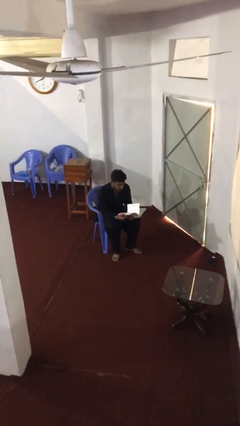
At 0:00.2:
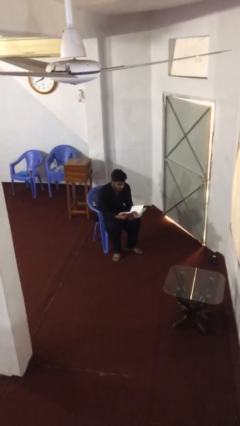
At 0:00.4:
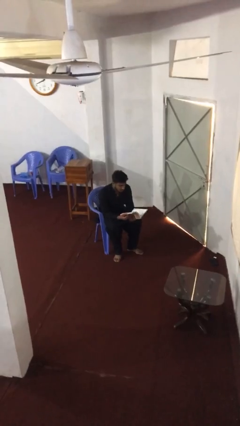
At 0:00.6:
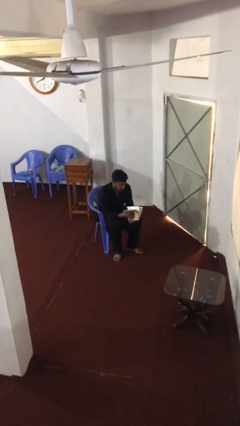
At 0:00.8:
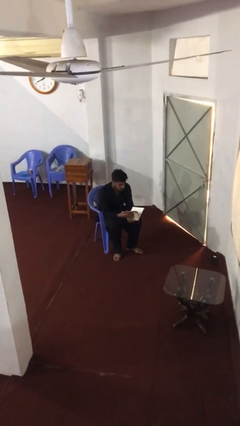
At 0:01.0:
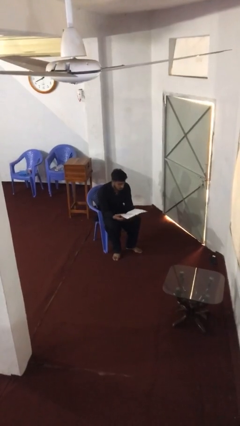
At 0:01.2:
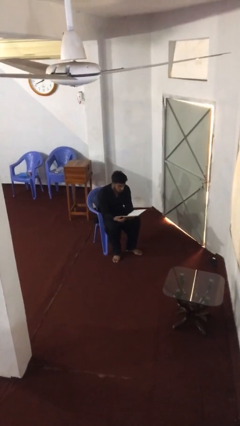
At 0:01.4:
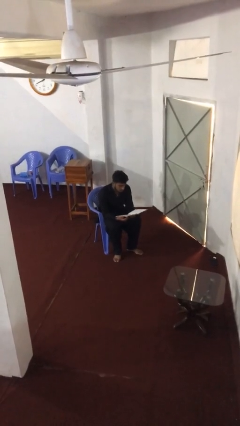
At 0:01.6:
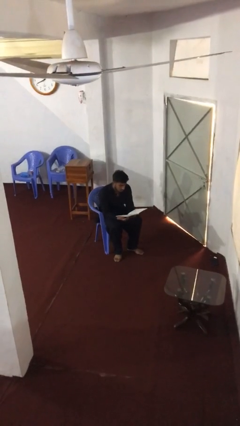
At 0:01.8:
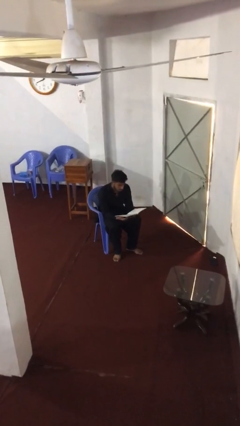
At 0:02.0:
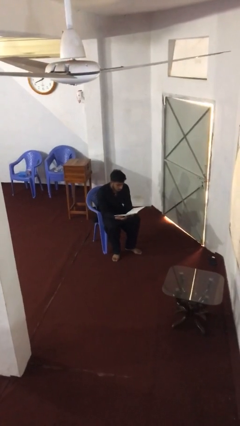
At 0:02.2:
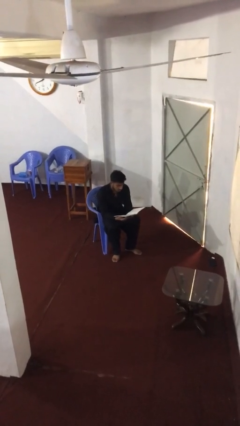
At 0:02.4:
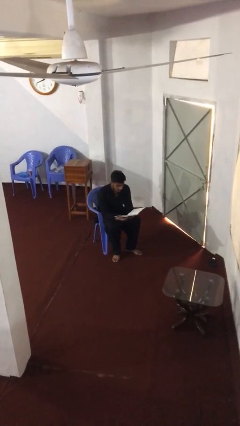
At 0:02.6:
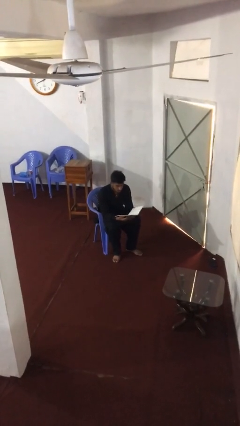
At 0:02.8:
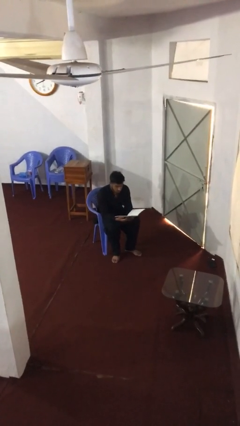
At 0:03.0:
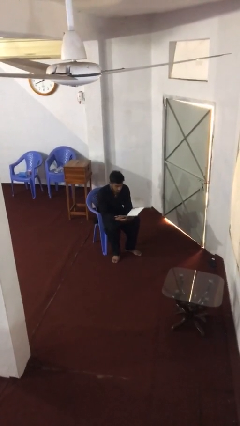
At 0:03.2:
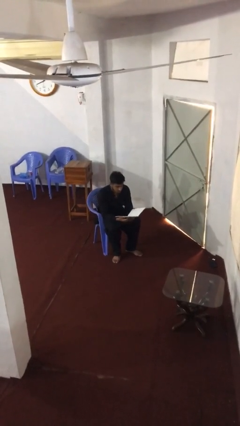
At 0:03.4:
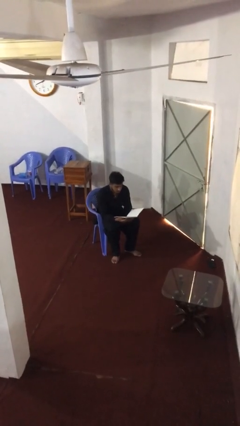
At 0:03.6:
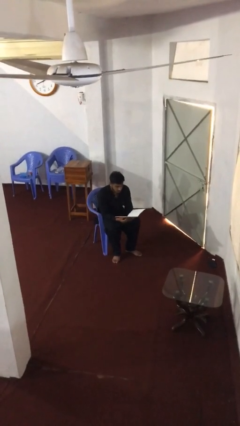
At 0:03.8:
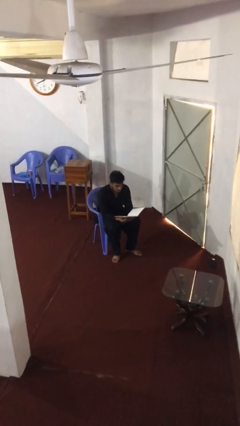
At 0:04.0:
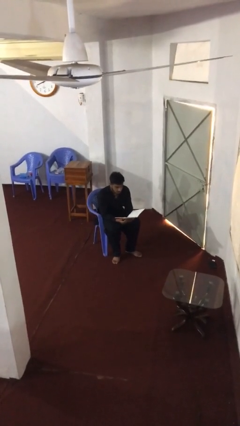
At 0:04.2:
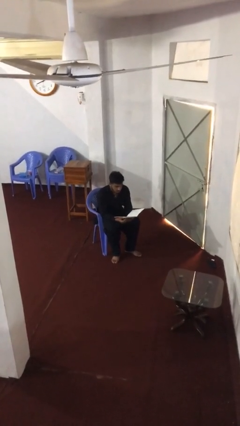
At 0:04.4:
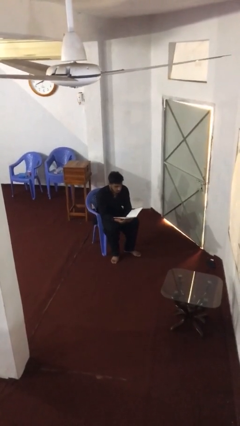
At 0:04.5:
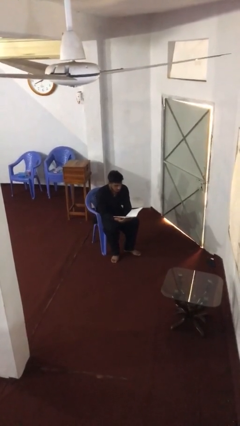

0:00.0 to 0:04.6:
person reads document

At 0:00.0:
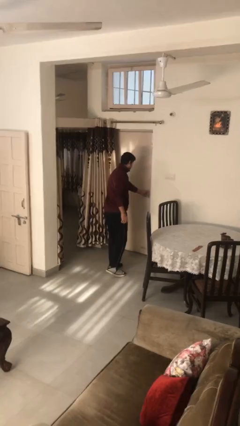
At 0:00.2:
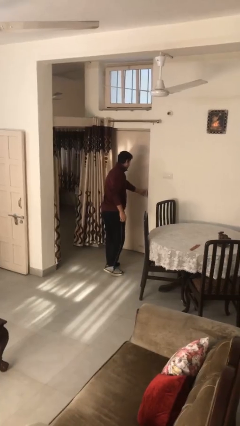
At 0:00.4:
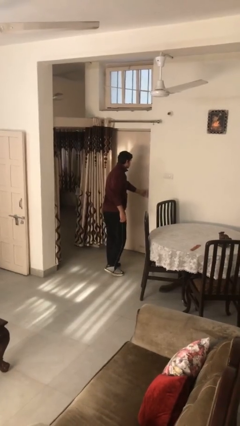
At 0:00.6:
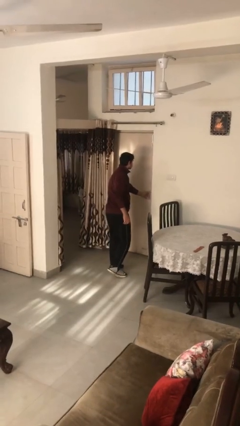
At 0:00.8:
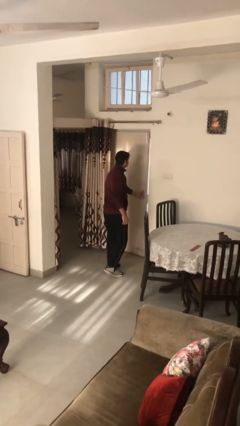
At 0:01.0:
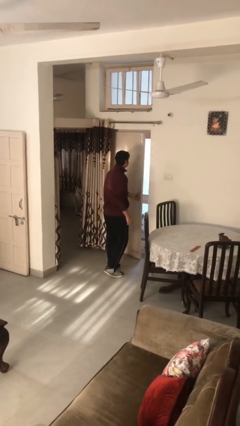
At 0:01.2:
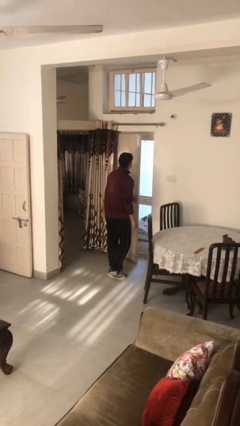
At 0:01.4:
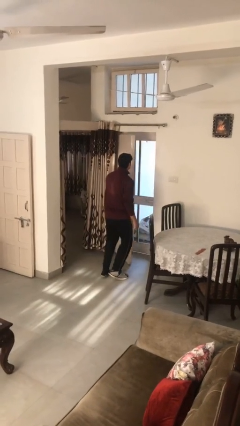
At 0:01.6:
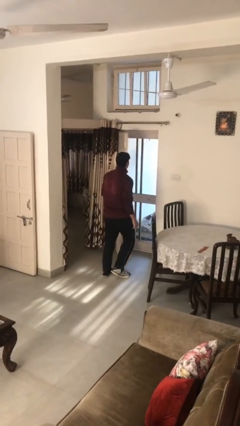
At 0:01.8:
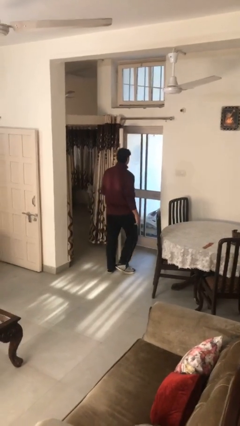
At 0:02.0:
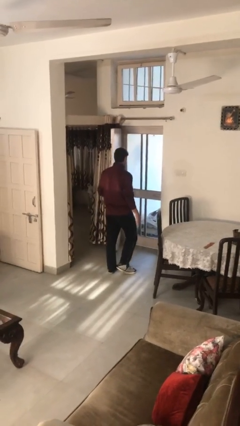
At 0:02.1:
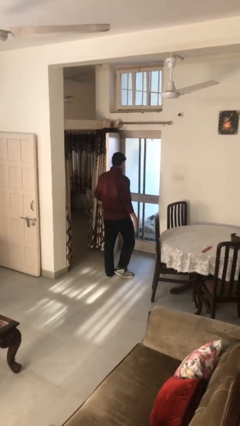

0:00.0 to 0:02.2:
person opens facility door

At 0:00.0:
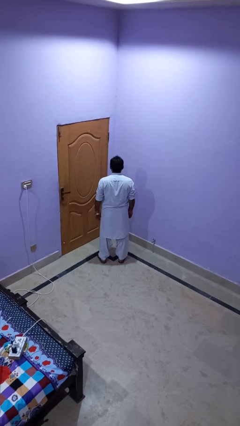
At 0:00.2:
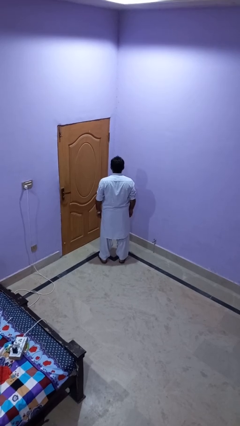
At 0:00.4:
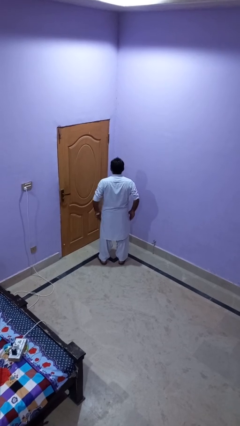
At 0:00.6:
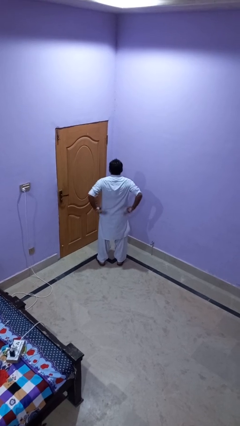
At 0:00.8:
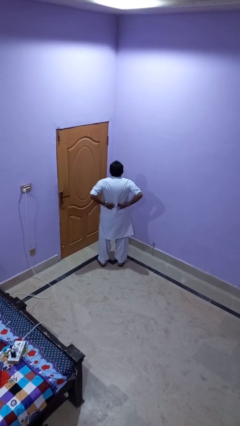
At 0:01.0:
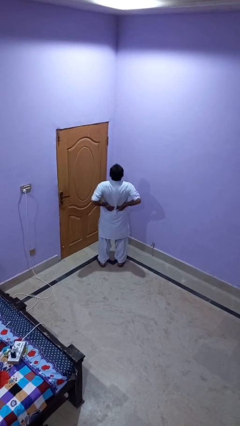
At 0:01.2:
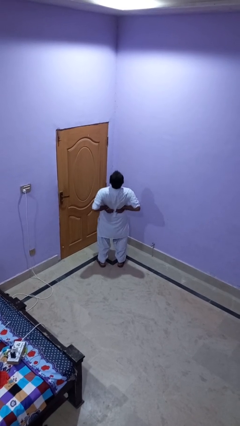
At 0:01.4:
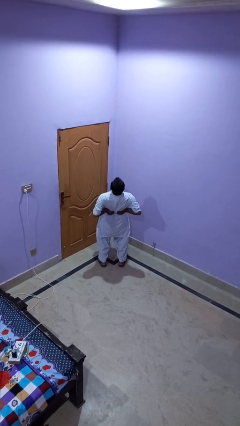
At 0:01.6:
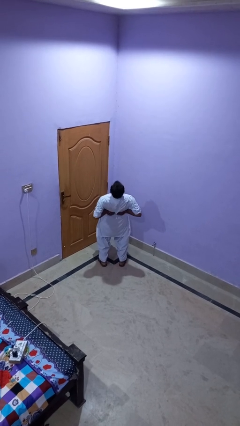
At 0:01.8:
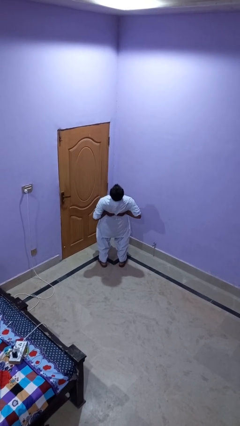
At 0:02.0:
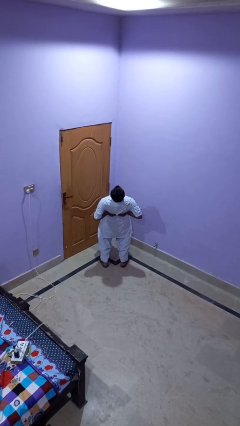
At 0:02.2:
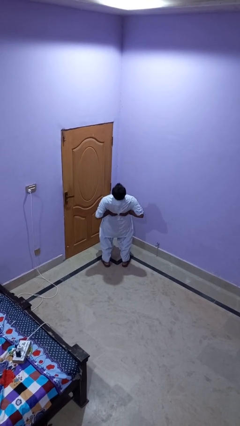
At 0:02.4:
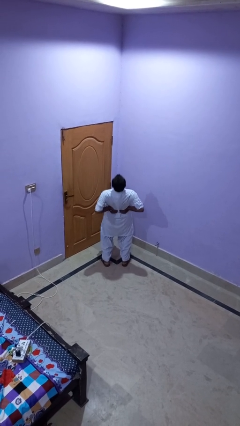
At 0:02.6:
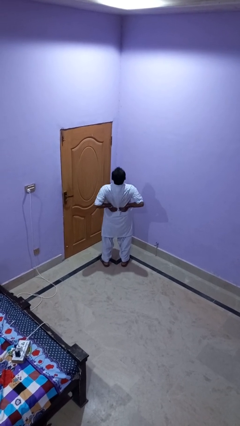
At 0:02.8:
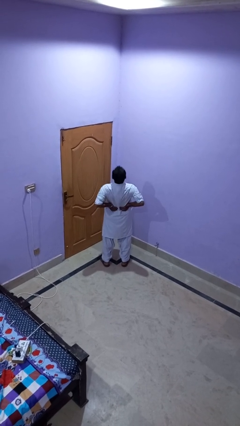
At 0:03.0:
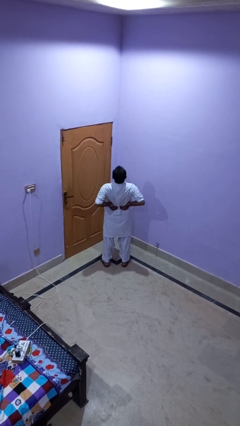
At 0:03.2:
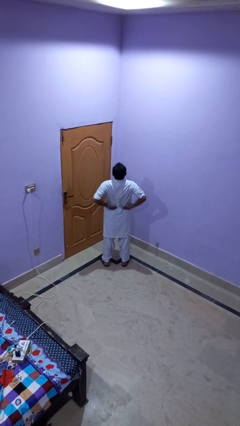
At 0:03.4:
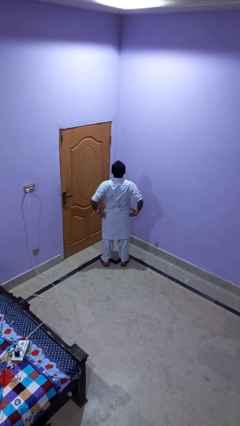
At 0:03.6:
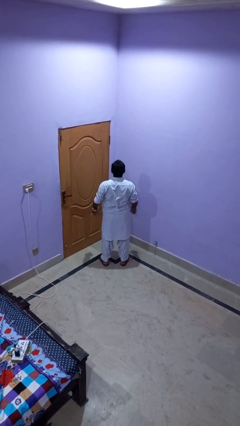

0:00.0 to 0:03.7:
person stretches back

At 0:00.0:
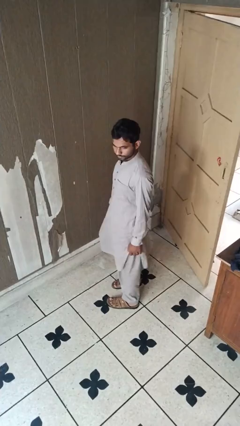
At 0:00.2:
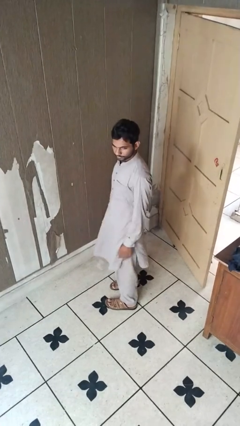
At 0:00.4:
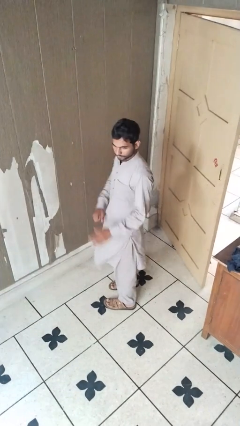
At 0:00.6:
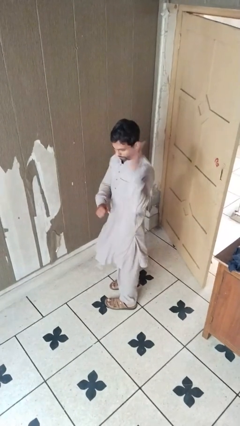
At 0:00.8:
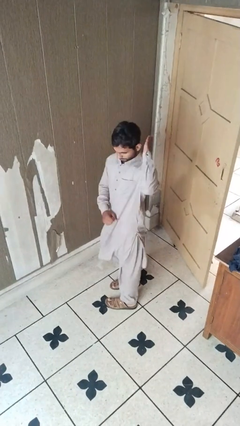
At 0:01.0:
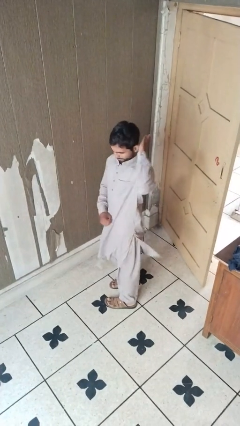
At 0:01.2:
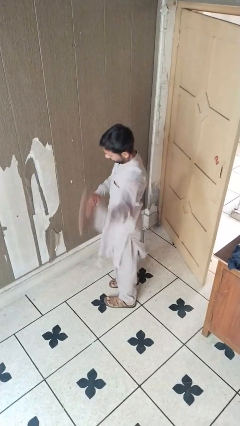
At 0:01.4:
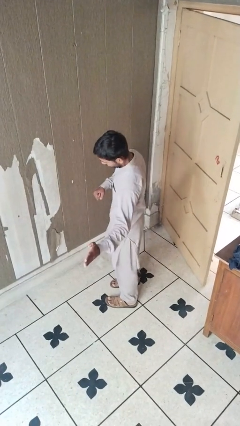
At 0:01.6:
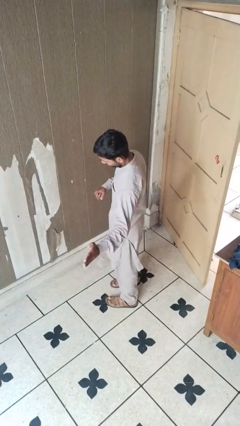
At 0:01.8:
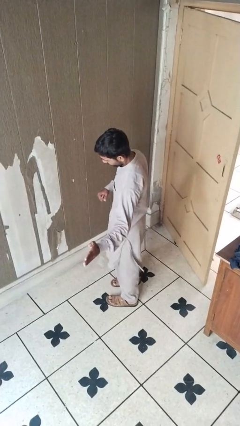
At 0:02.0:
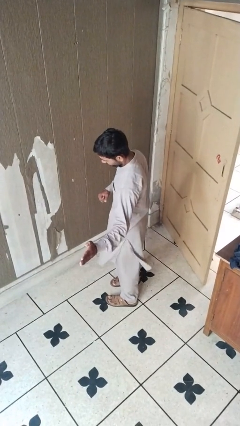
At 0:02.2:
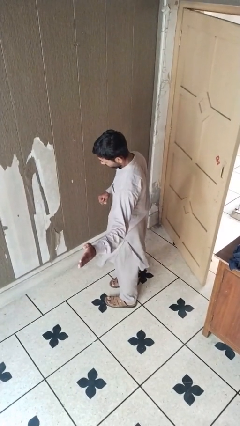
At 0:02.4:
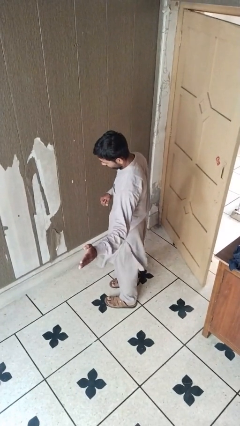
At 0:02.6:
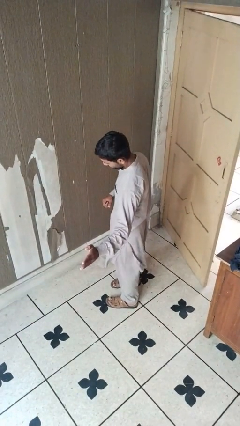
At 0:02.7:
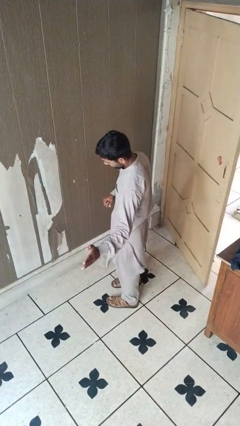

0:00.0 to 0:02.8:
person karate chop

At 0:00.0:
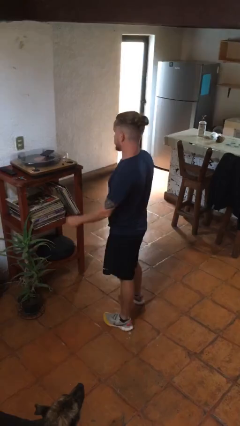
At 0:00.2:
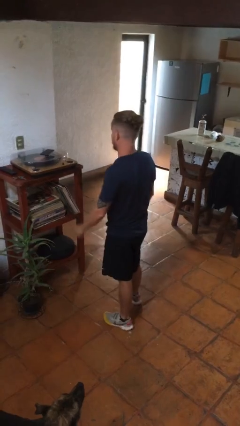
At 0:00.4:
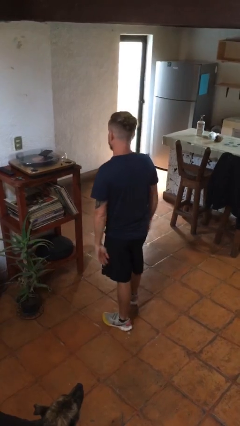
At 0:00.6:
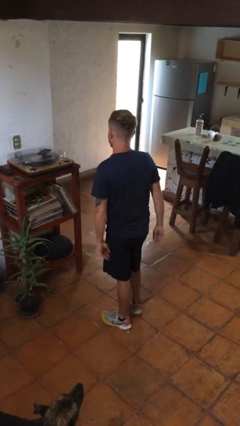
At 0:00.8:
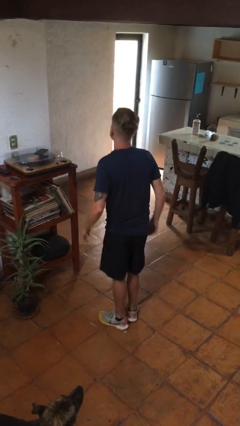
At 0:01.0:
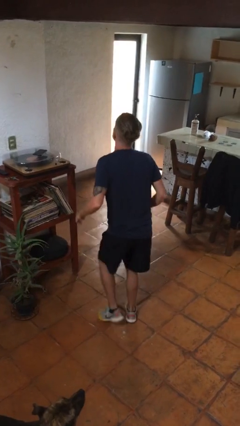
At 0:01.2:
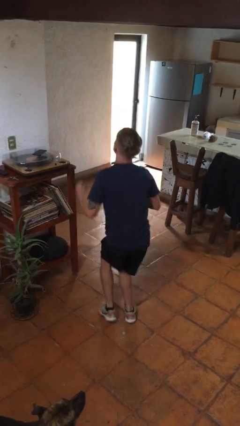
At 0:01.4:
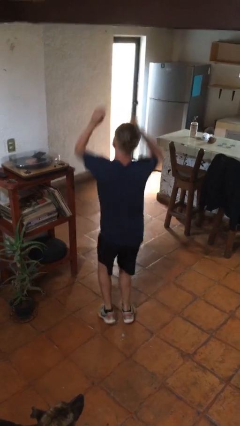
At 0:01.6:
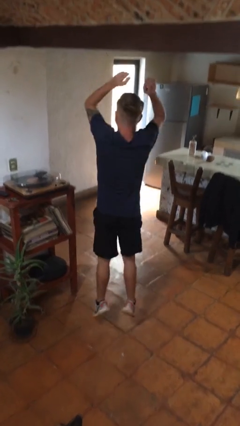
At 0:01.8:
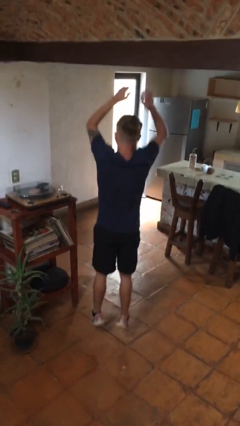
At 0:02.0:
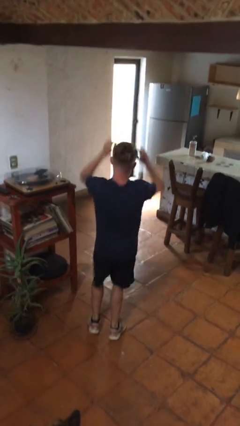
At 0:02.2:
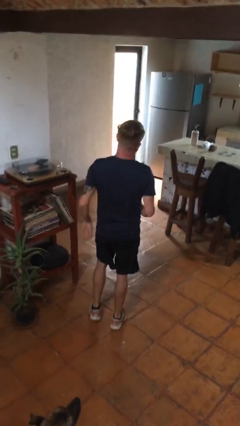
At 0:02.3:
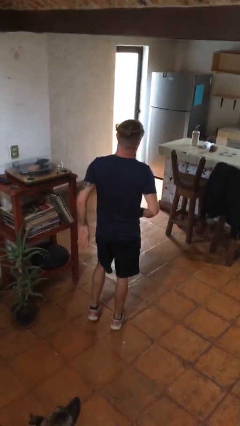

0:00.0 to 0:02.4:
person jumps

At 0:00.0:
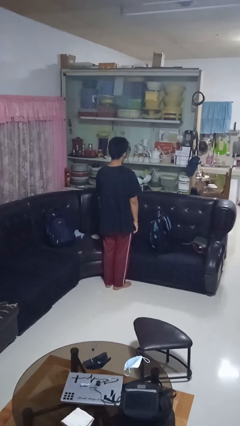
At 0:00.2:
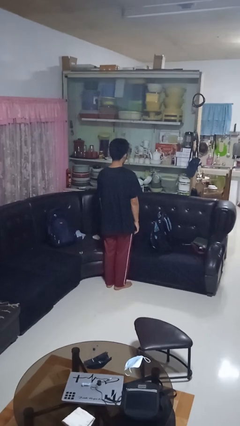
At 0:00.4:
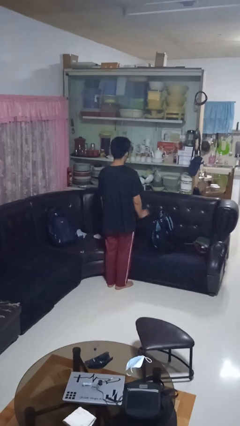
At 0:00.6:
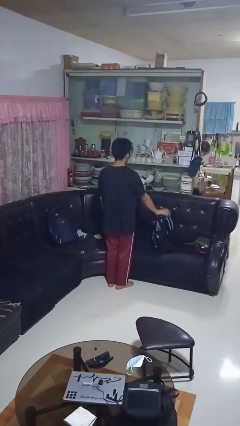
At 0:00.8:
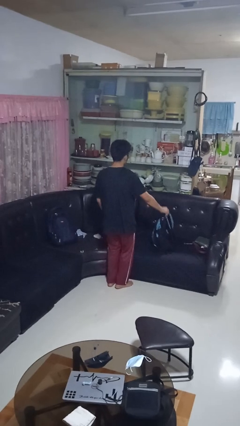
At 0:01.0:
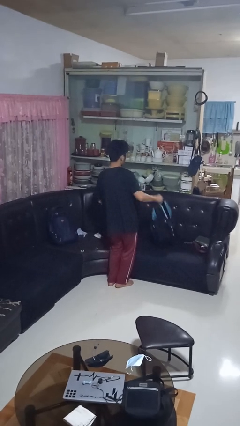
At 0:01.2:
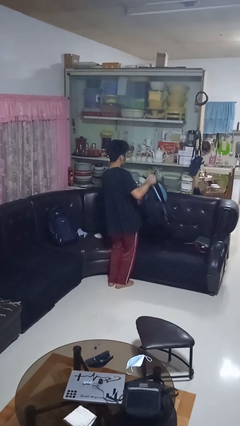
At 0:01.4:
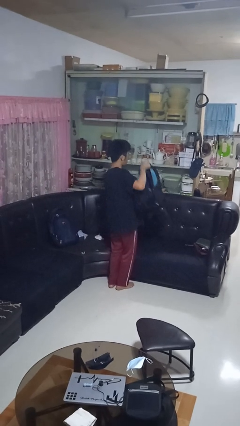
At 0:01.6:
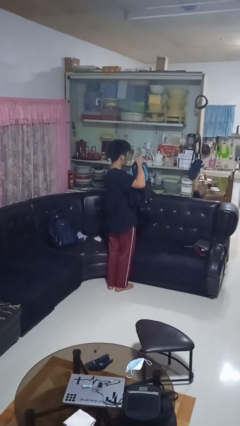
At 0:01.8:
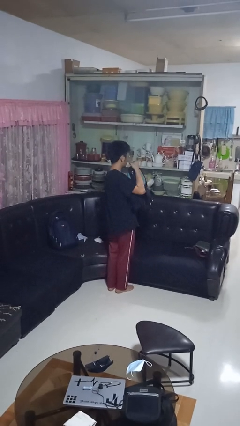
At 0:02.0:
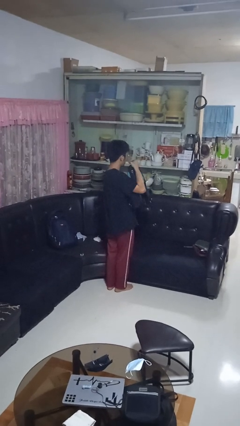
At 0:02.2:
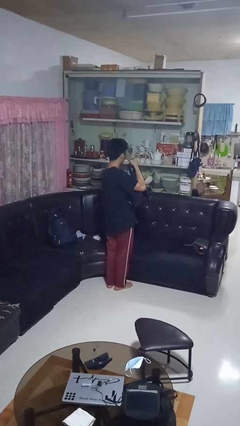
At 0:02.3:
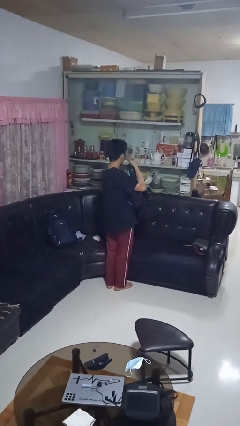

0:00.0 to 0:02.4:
person picks up object from couch
